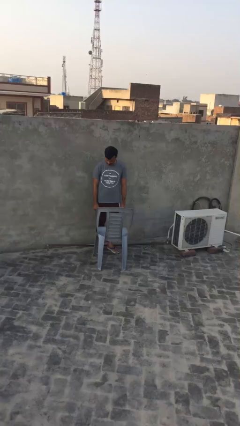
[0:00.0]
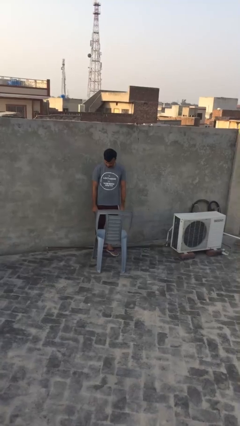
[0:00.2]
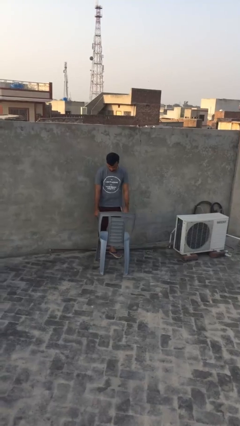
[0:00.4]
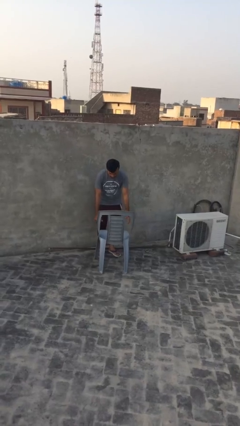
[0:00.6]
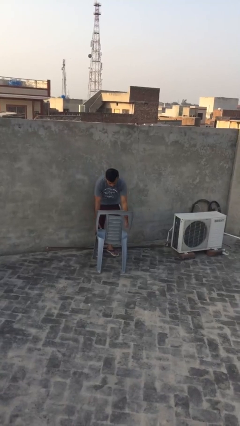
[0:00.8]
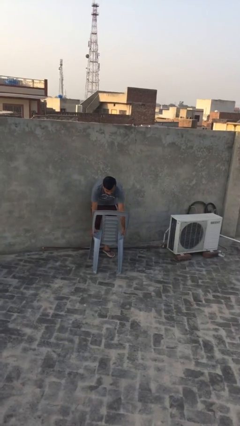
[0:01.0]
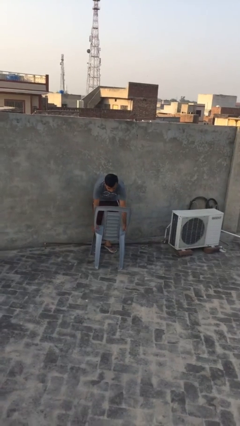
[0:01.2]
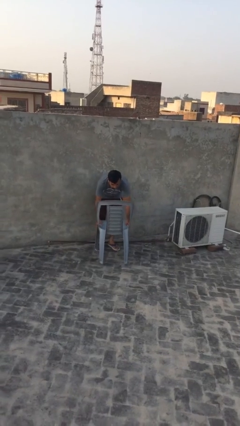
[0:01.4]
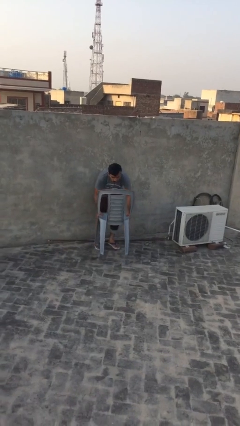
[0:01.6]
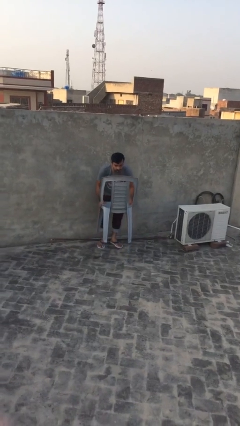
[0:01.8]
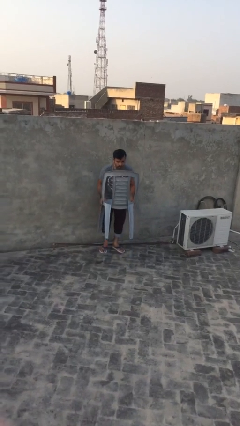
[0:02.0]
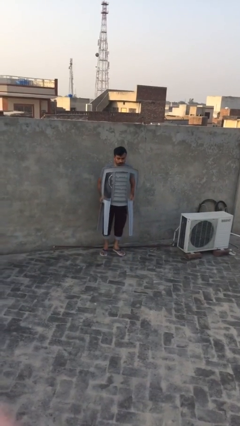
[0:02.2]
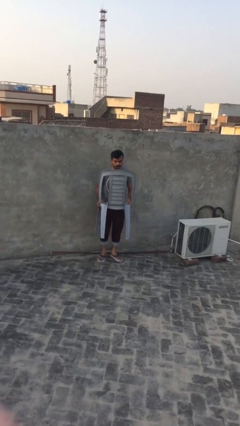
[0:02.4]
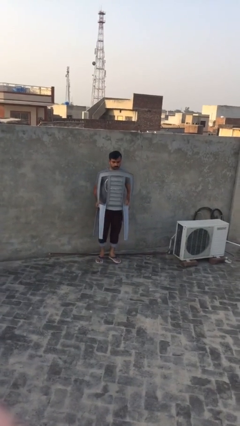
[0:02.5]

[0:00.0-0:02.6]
person picks up object from floor

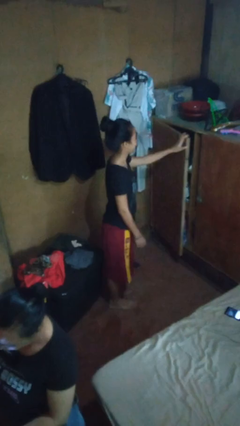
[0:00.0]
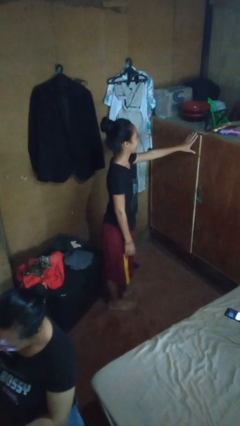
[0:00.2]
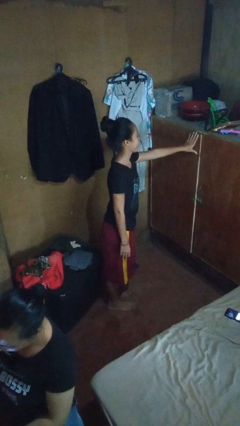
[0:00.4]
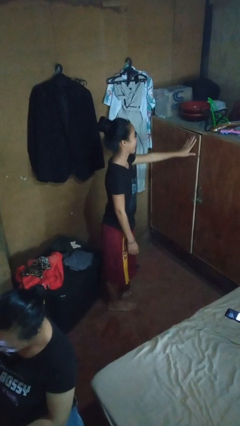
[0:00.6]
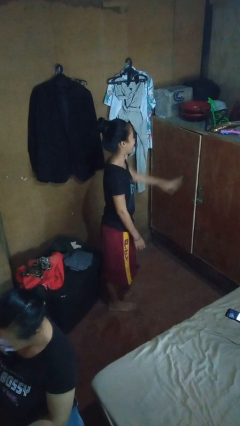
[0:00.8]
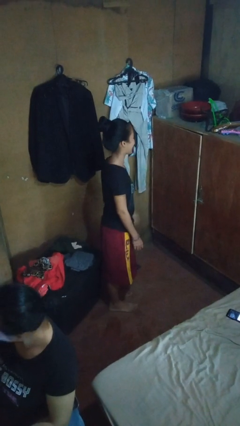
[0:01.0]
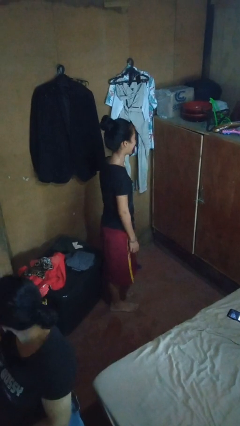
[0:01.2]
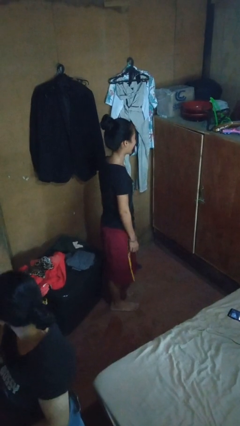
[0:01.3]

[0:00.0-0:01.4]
person closes closet door

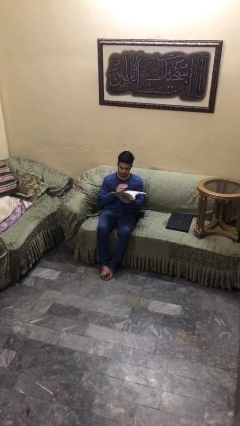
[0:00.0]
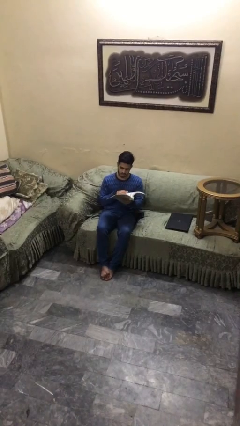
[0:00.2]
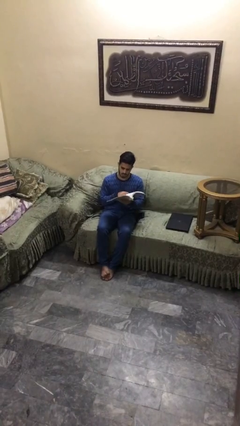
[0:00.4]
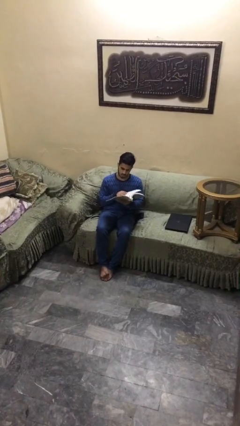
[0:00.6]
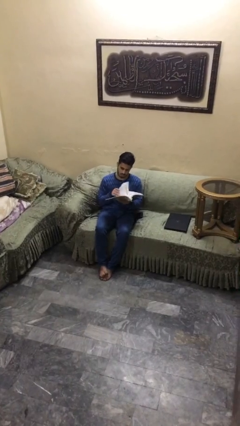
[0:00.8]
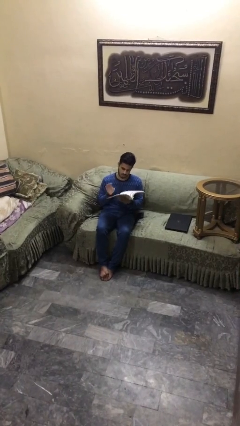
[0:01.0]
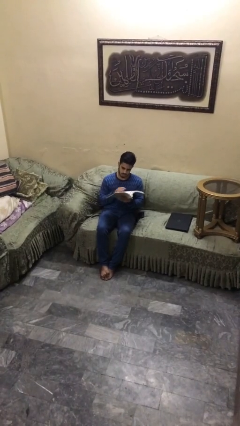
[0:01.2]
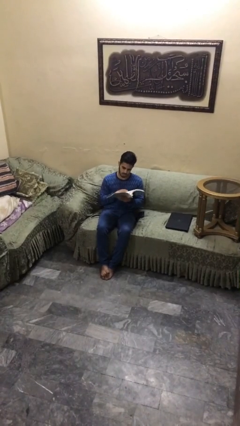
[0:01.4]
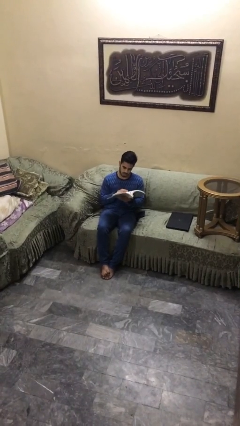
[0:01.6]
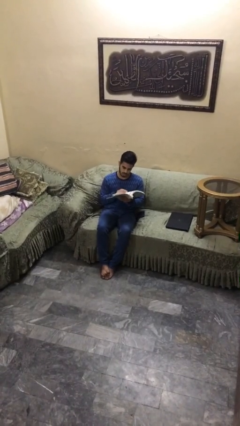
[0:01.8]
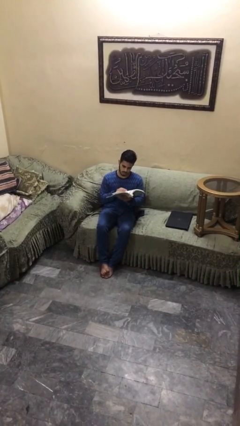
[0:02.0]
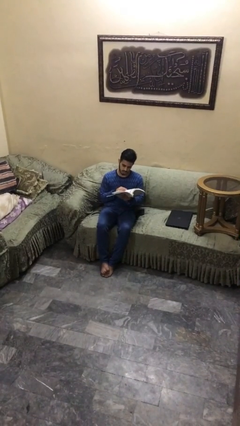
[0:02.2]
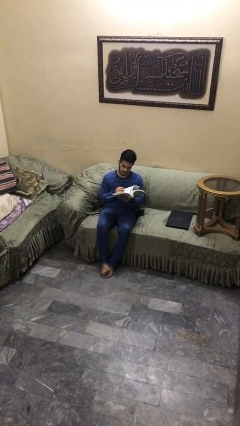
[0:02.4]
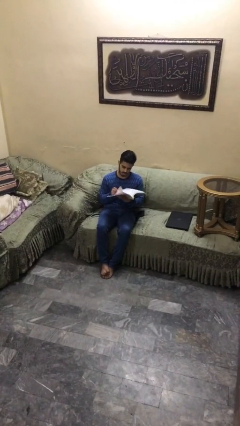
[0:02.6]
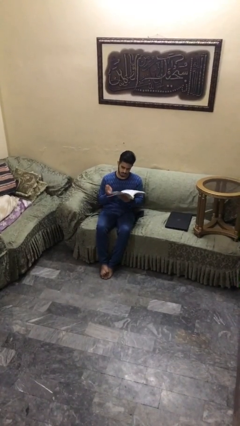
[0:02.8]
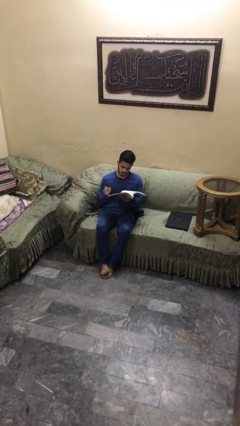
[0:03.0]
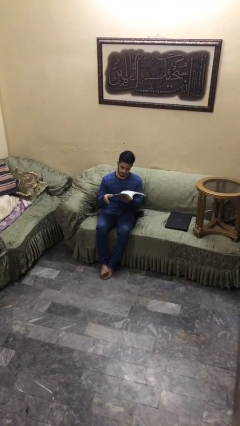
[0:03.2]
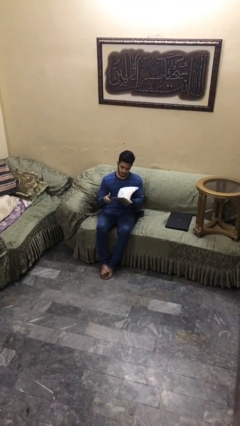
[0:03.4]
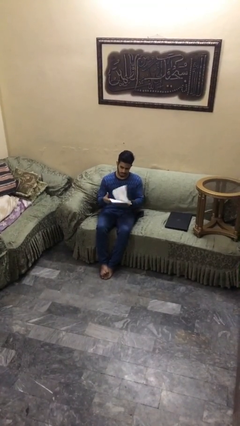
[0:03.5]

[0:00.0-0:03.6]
person reads document

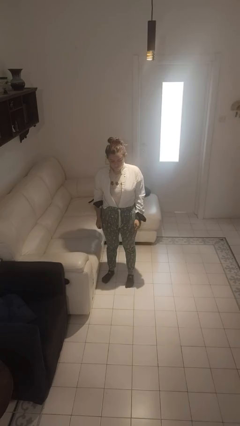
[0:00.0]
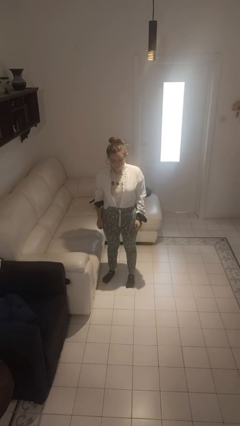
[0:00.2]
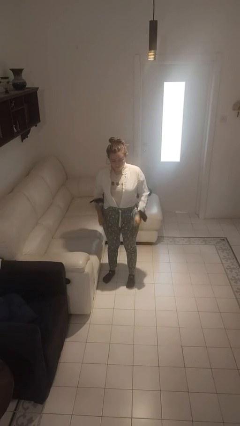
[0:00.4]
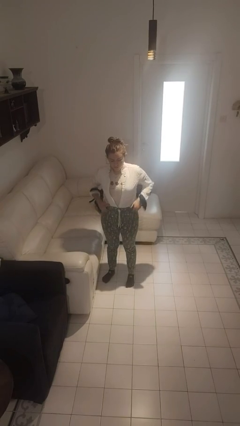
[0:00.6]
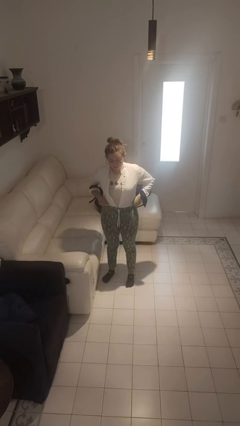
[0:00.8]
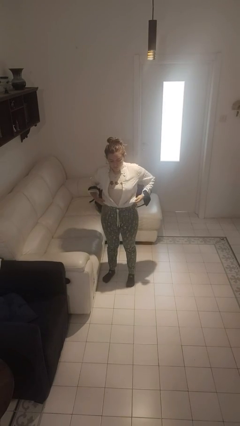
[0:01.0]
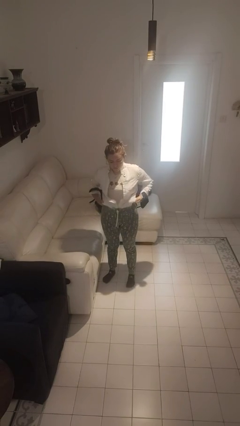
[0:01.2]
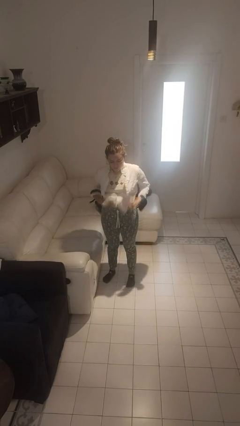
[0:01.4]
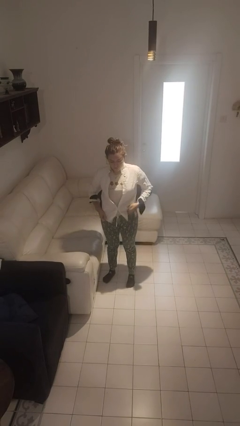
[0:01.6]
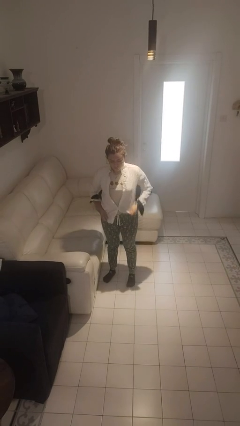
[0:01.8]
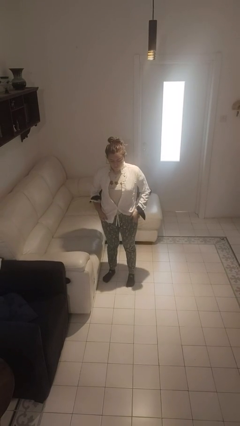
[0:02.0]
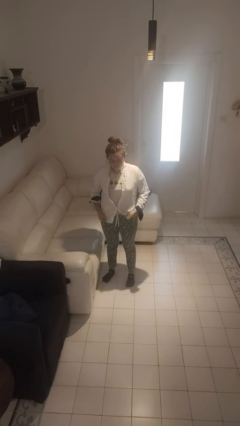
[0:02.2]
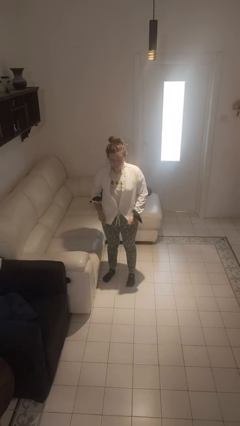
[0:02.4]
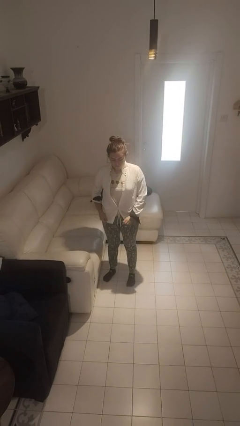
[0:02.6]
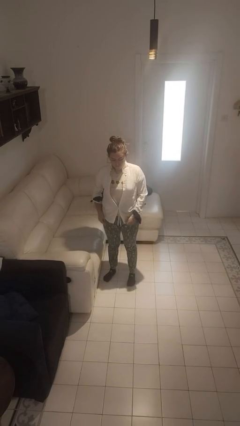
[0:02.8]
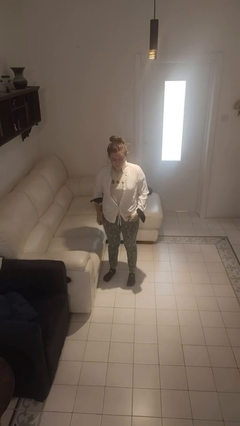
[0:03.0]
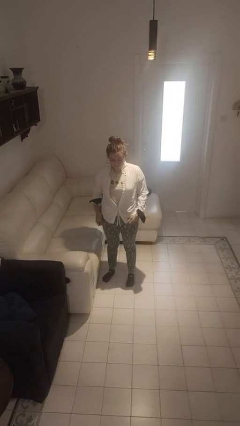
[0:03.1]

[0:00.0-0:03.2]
person untucks shirt

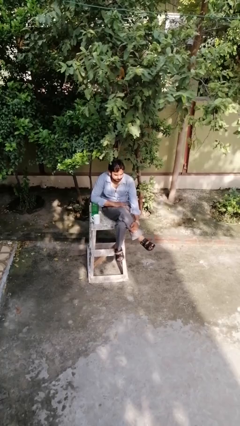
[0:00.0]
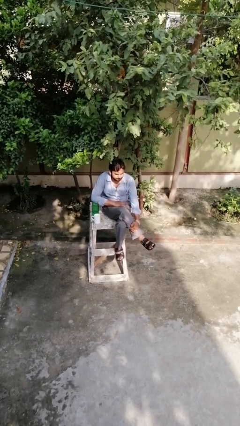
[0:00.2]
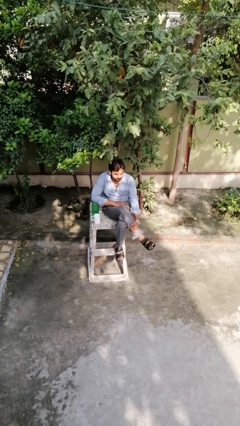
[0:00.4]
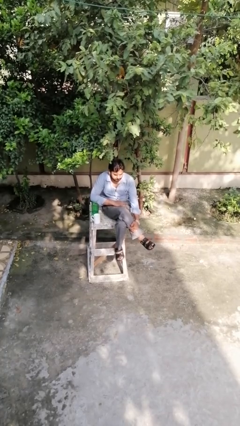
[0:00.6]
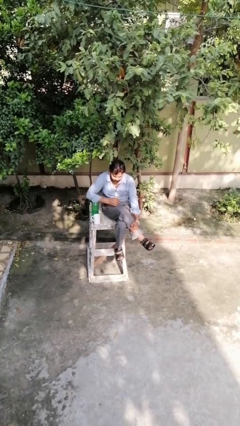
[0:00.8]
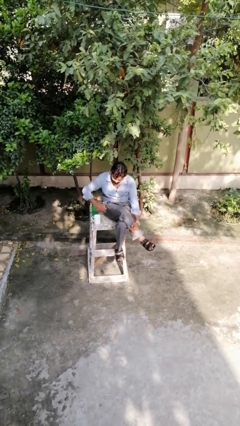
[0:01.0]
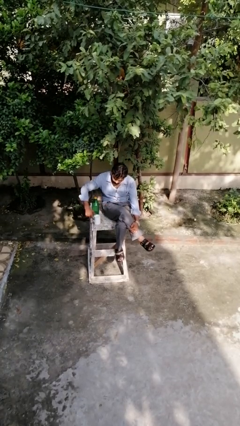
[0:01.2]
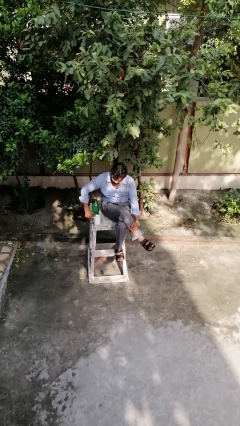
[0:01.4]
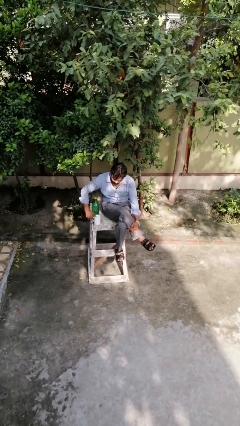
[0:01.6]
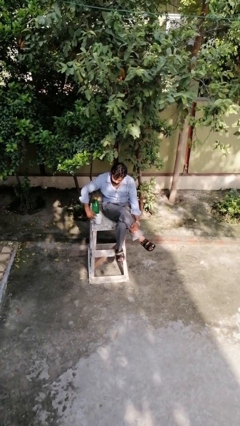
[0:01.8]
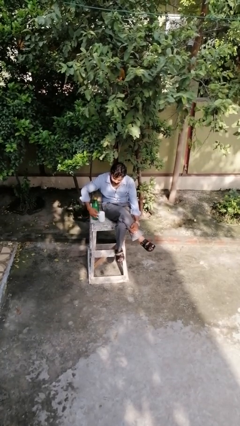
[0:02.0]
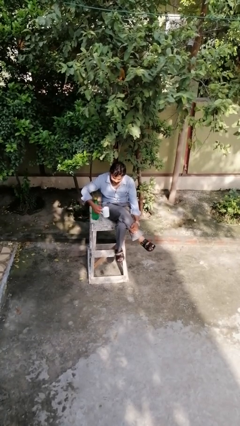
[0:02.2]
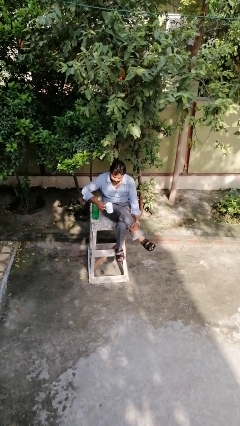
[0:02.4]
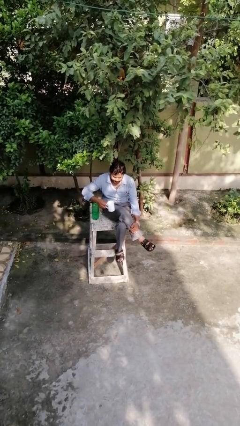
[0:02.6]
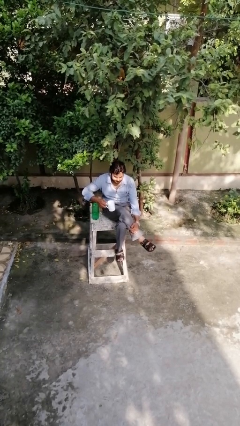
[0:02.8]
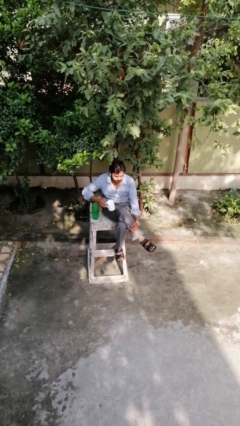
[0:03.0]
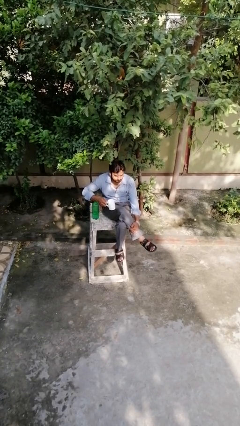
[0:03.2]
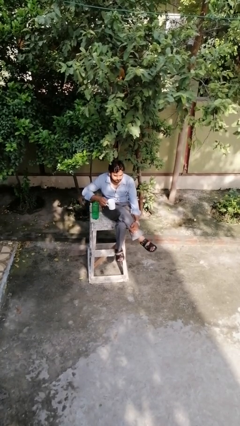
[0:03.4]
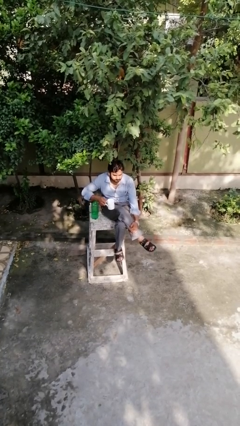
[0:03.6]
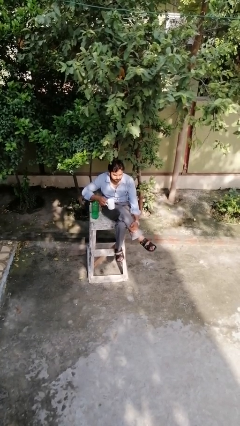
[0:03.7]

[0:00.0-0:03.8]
person picks up object from table

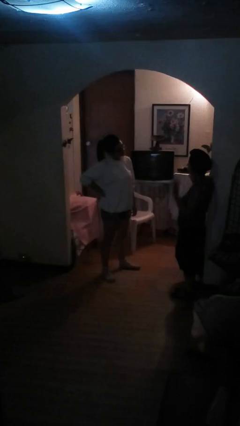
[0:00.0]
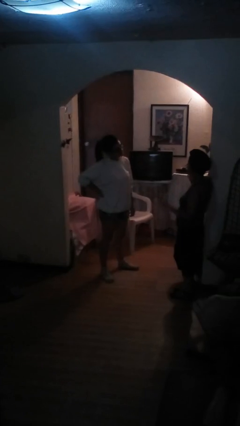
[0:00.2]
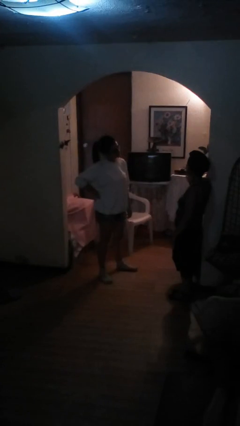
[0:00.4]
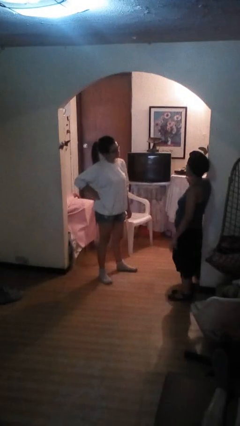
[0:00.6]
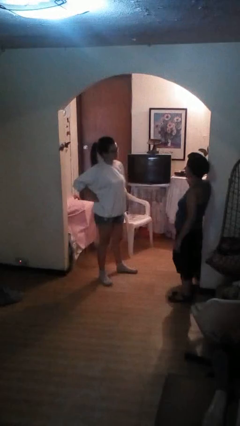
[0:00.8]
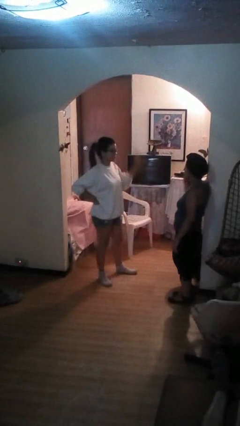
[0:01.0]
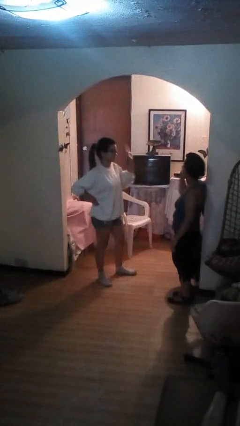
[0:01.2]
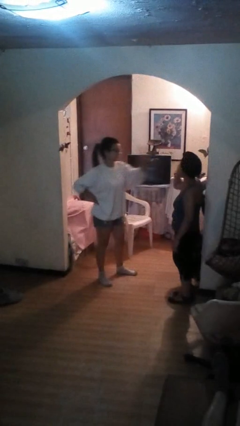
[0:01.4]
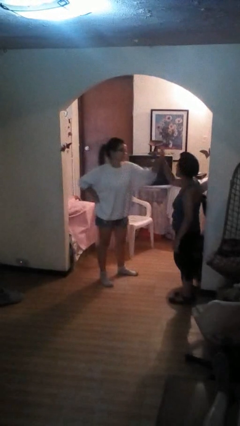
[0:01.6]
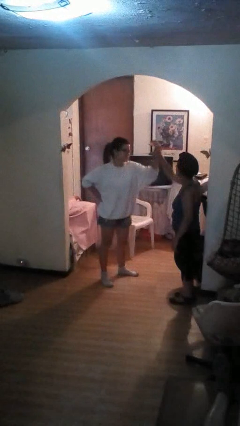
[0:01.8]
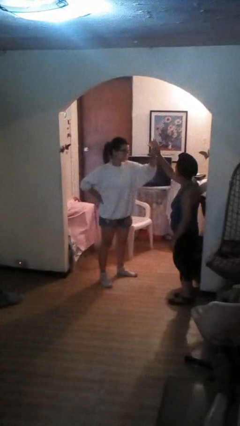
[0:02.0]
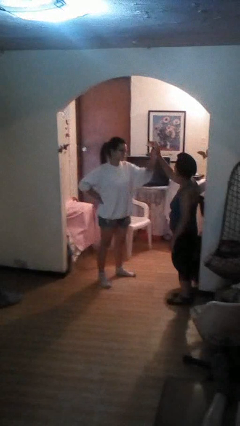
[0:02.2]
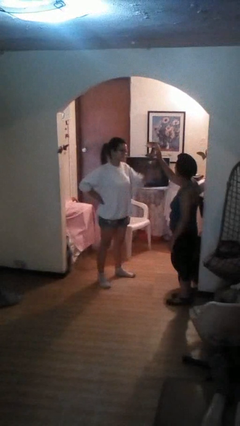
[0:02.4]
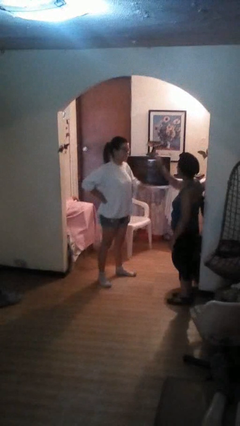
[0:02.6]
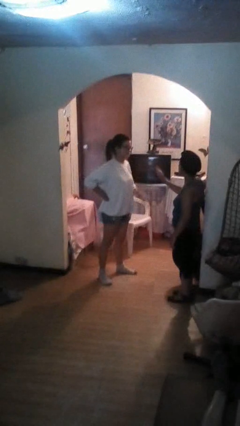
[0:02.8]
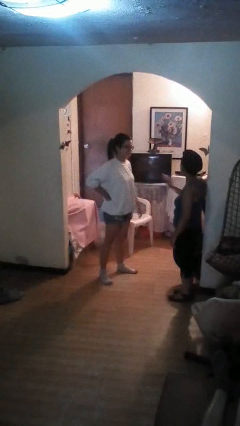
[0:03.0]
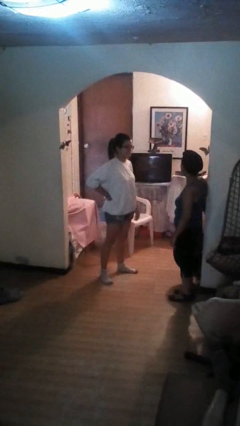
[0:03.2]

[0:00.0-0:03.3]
person highfives hand
